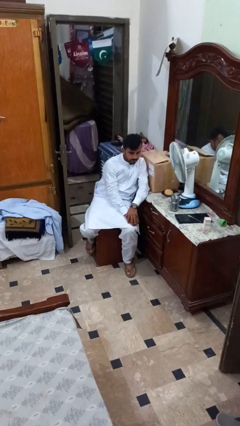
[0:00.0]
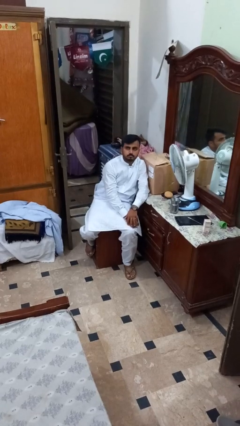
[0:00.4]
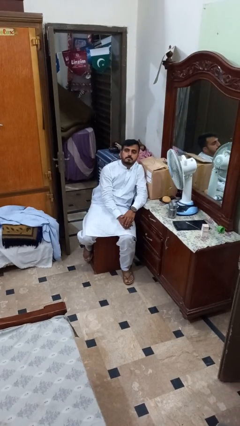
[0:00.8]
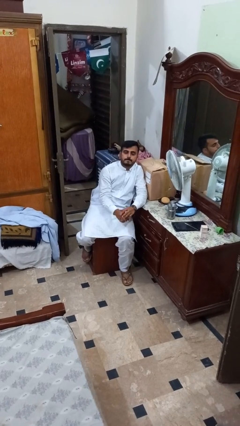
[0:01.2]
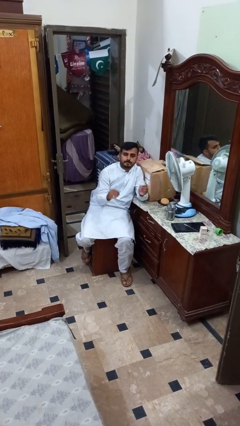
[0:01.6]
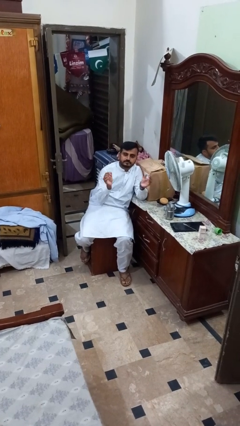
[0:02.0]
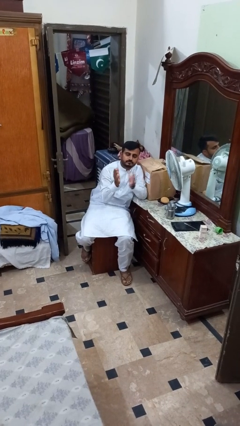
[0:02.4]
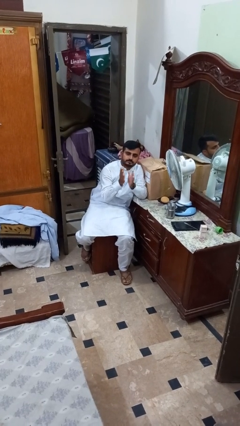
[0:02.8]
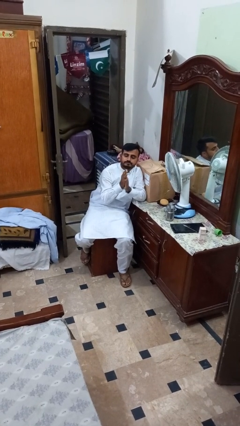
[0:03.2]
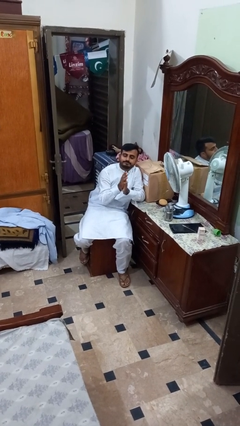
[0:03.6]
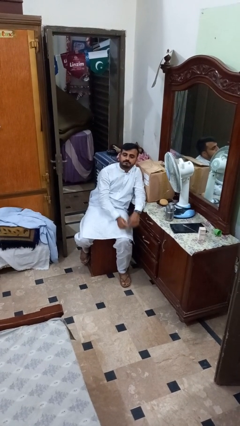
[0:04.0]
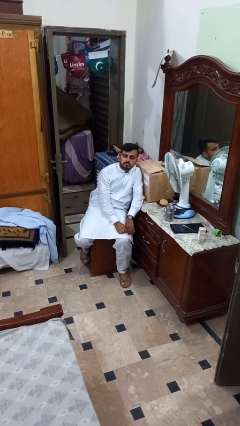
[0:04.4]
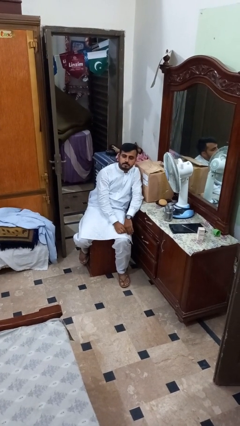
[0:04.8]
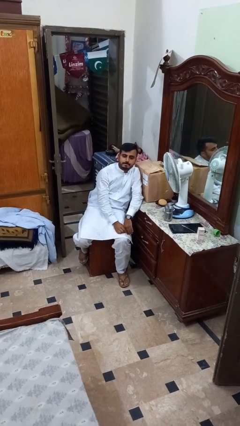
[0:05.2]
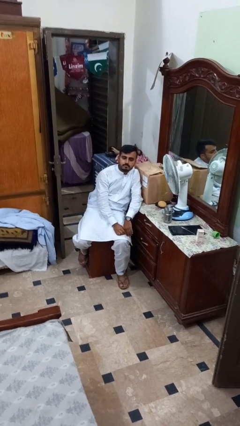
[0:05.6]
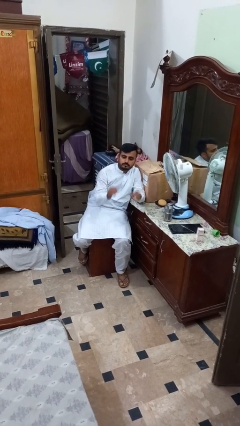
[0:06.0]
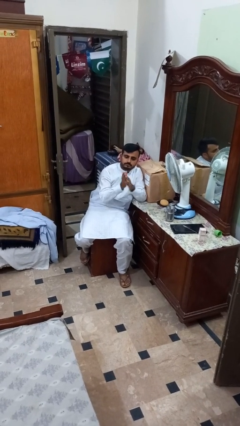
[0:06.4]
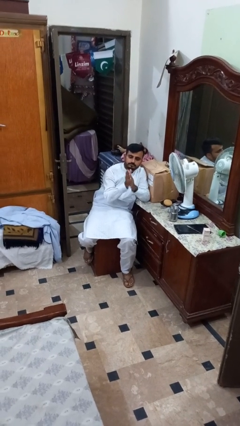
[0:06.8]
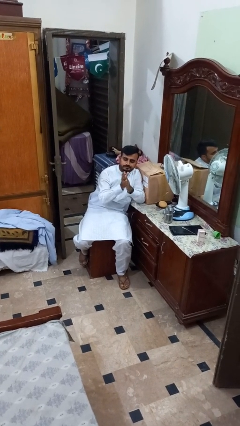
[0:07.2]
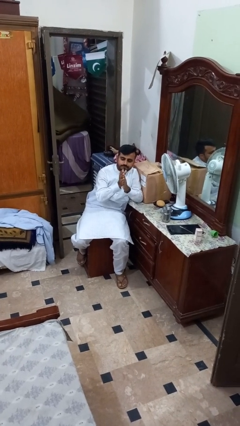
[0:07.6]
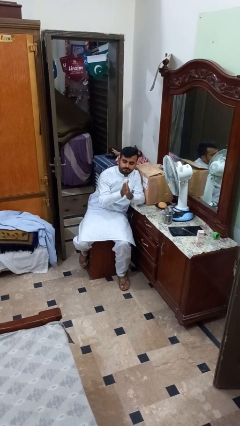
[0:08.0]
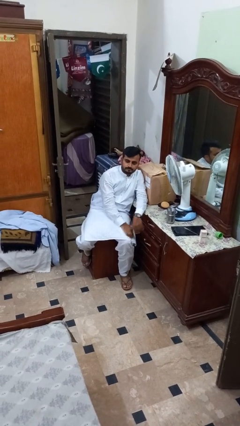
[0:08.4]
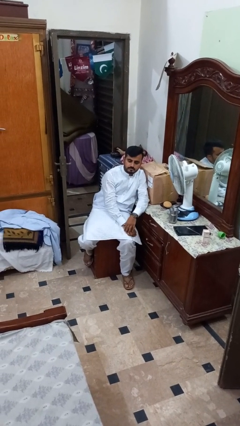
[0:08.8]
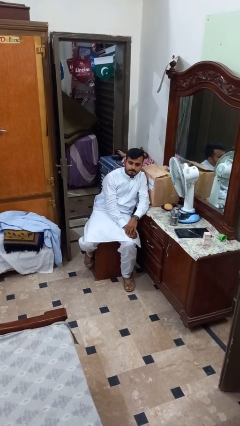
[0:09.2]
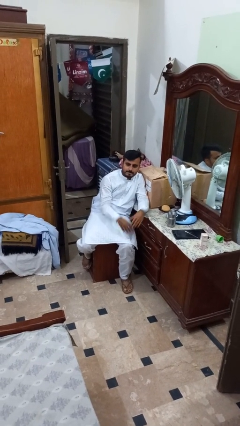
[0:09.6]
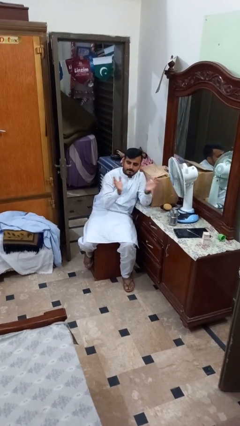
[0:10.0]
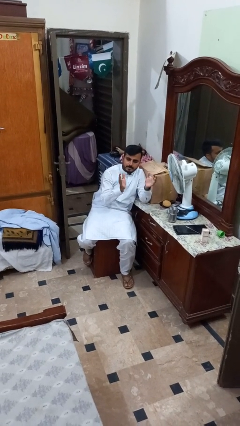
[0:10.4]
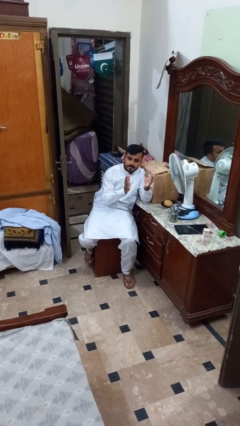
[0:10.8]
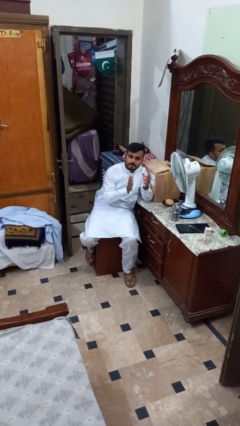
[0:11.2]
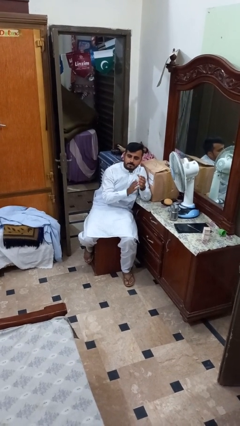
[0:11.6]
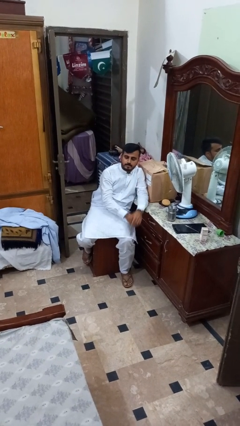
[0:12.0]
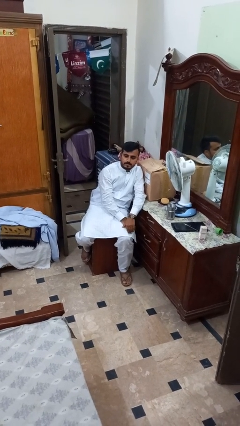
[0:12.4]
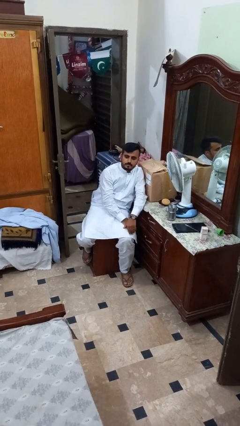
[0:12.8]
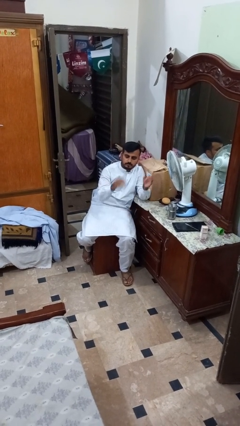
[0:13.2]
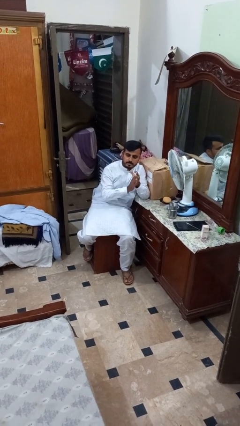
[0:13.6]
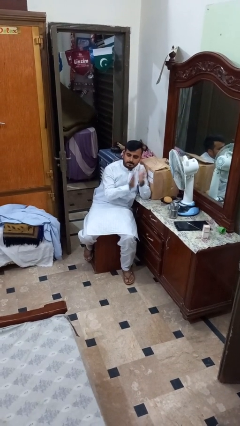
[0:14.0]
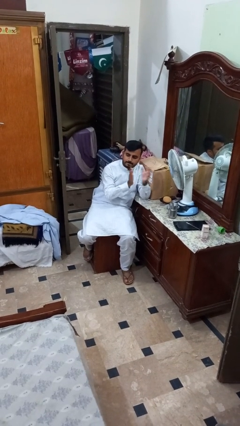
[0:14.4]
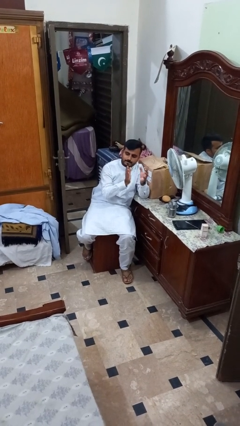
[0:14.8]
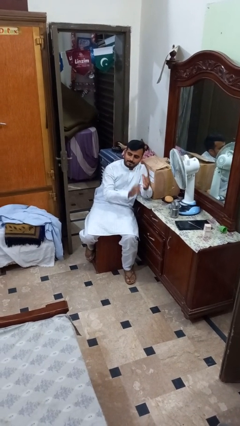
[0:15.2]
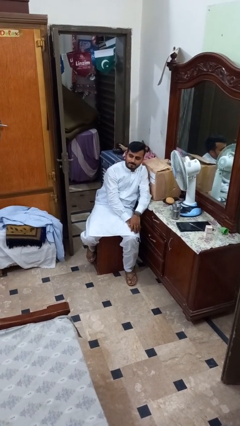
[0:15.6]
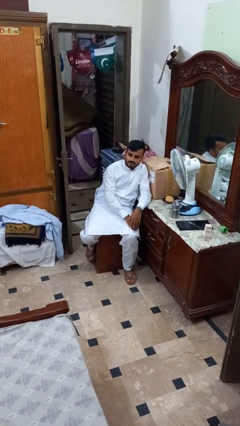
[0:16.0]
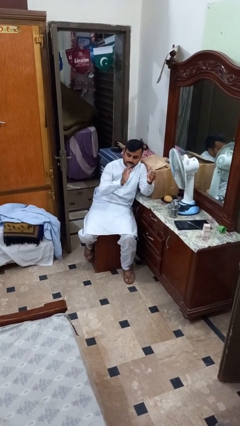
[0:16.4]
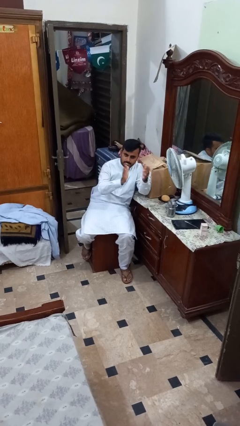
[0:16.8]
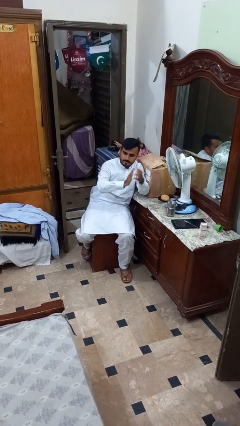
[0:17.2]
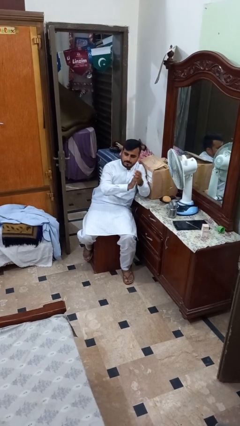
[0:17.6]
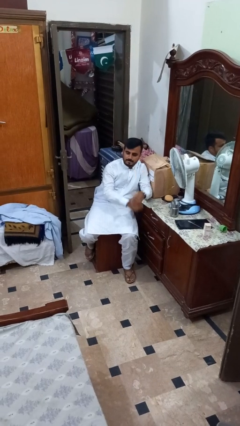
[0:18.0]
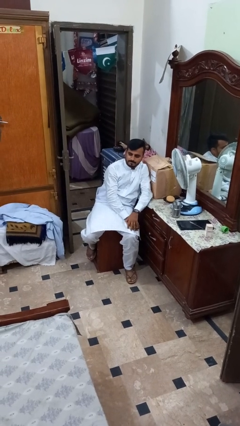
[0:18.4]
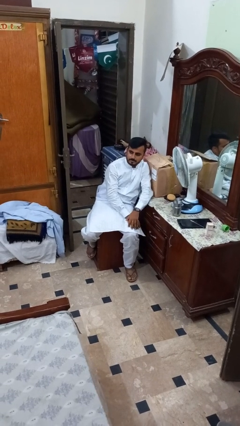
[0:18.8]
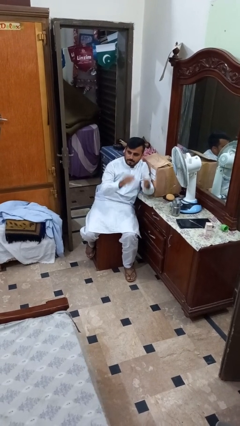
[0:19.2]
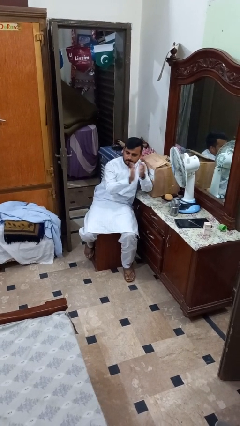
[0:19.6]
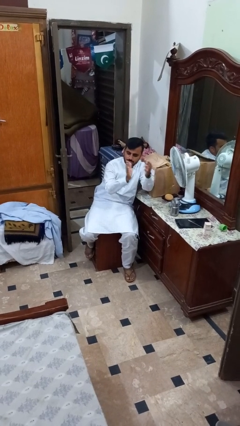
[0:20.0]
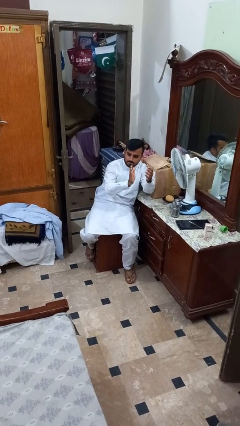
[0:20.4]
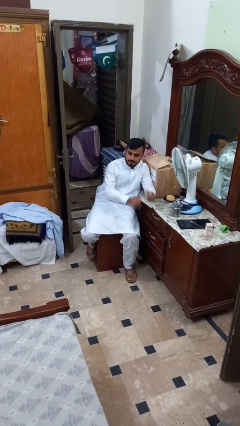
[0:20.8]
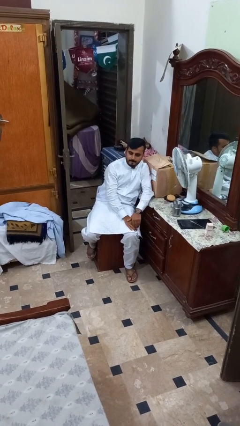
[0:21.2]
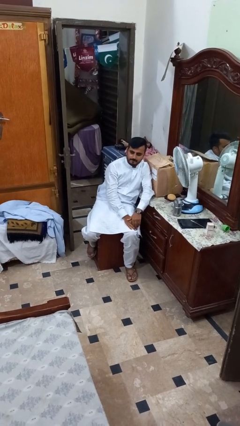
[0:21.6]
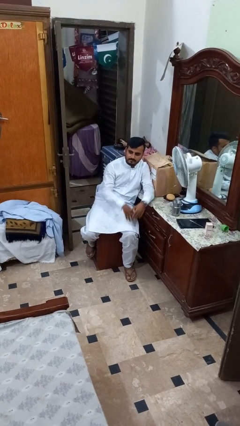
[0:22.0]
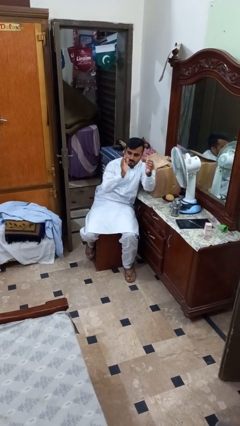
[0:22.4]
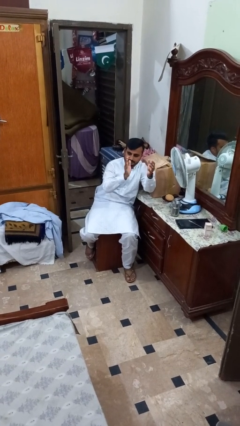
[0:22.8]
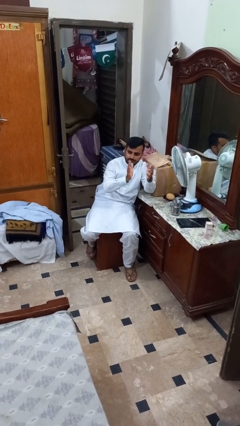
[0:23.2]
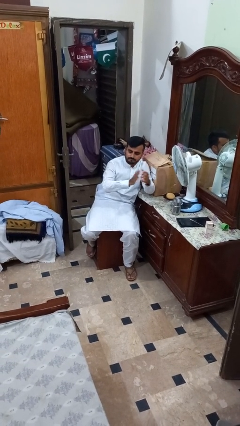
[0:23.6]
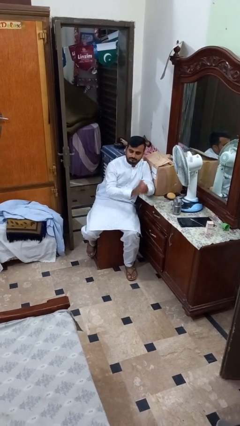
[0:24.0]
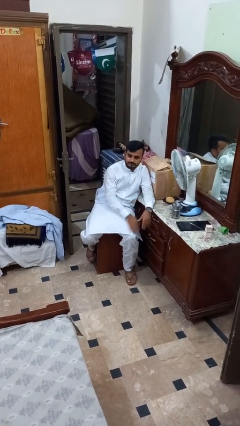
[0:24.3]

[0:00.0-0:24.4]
person claps hands

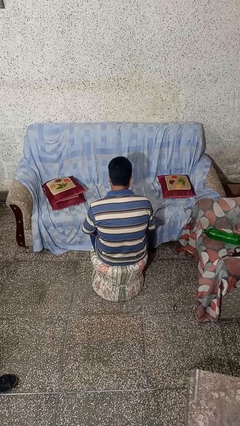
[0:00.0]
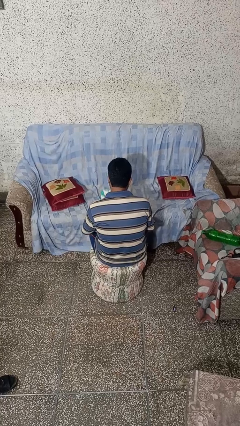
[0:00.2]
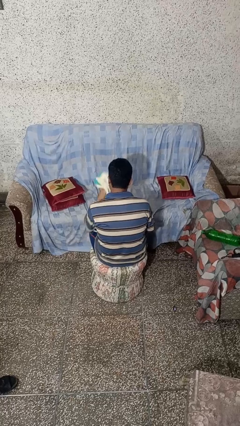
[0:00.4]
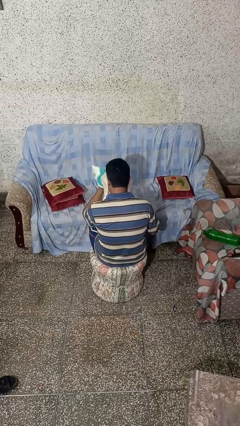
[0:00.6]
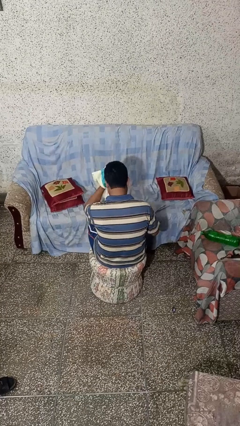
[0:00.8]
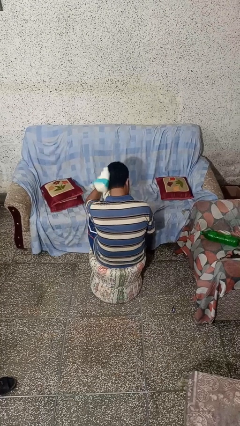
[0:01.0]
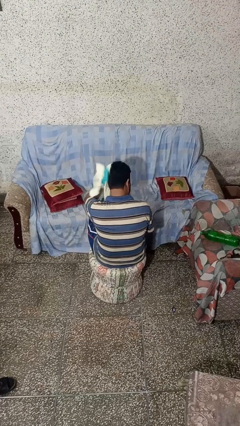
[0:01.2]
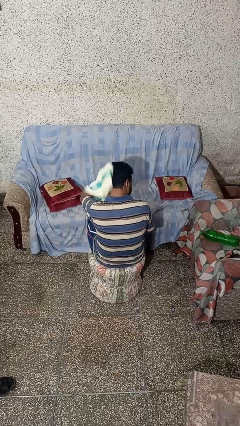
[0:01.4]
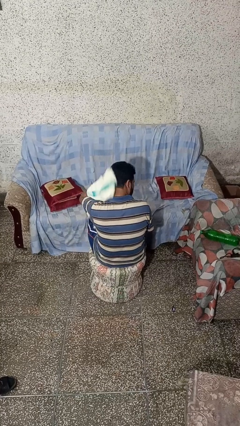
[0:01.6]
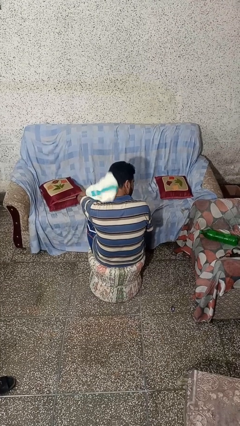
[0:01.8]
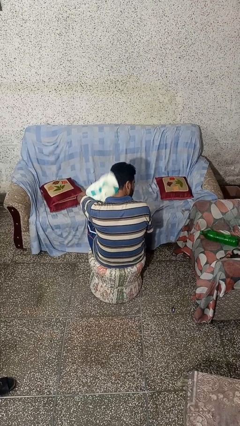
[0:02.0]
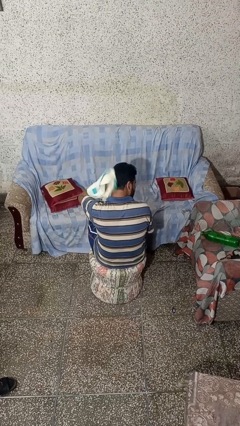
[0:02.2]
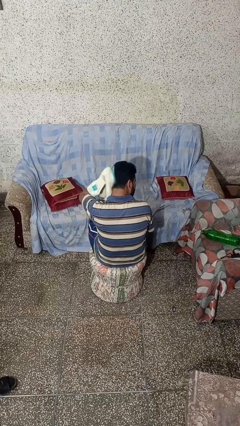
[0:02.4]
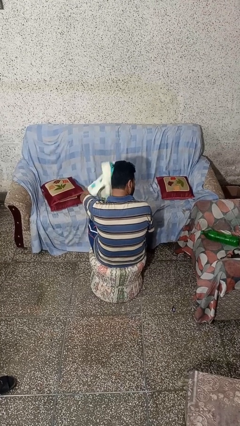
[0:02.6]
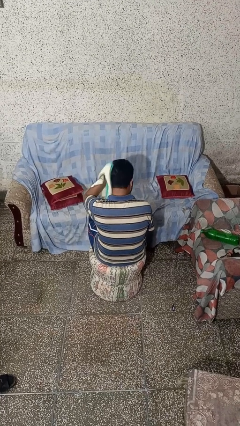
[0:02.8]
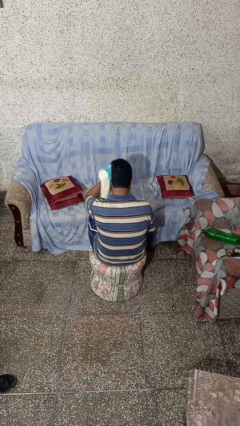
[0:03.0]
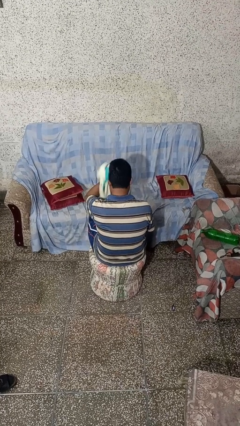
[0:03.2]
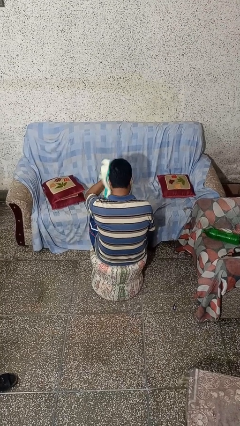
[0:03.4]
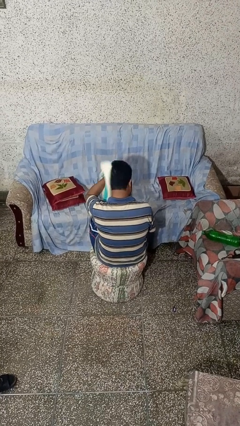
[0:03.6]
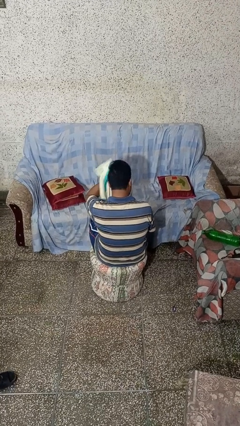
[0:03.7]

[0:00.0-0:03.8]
person dries hair with towel

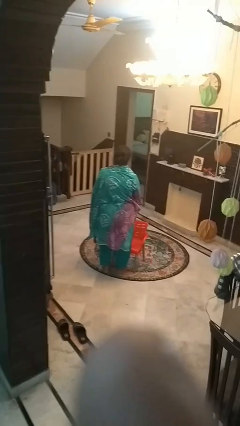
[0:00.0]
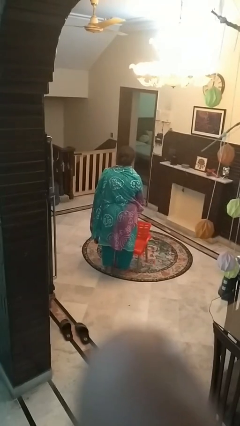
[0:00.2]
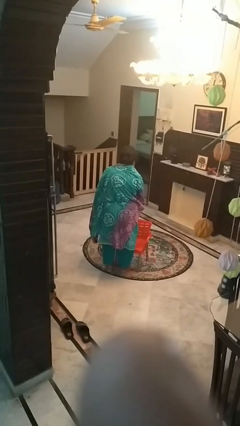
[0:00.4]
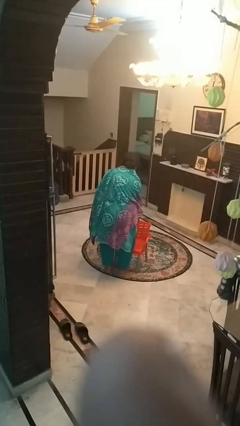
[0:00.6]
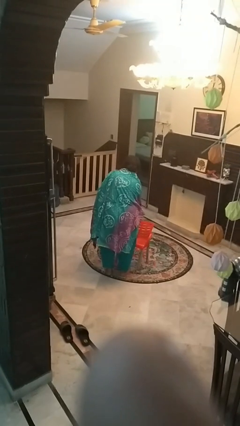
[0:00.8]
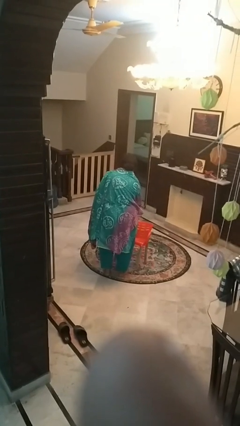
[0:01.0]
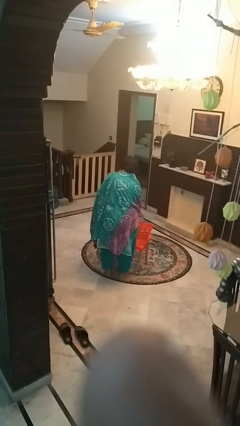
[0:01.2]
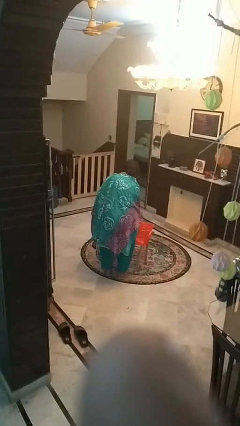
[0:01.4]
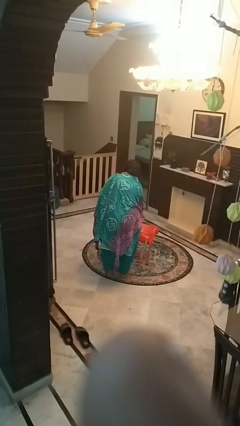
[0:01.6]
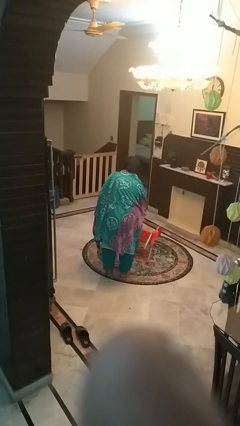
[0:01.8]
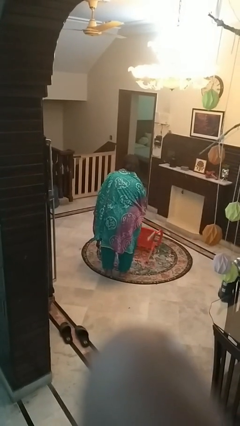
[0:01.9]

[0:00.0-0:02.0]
person knocks over furniture
